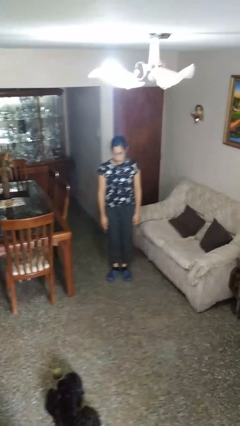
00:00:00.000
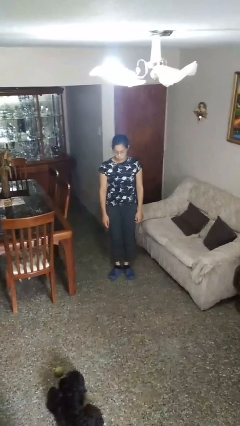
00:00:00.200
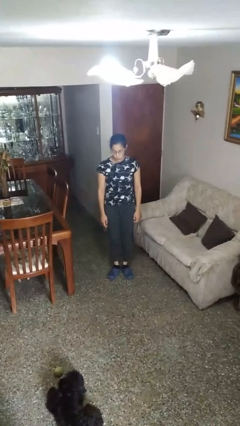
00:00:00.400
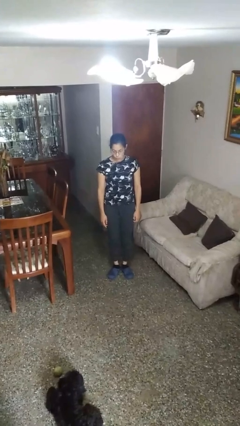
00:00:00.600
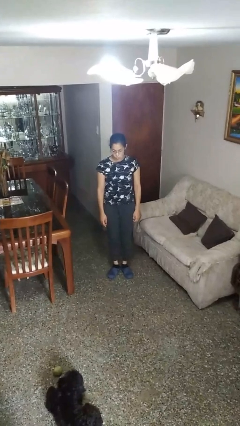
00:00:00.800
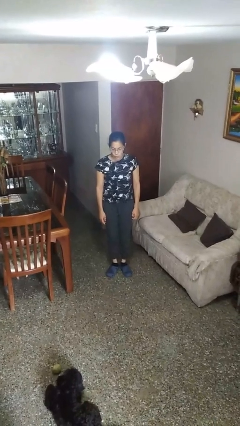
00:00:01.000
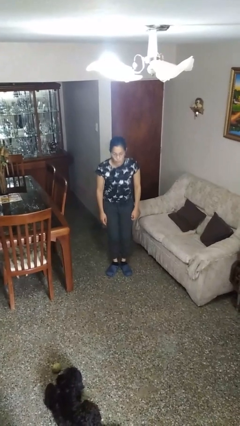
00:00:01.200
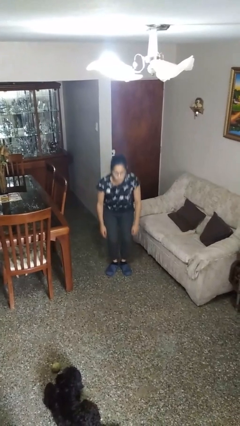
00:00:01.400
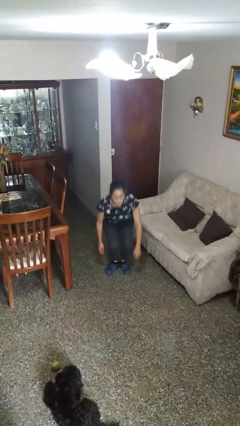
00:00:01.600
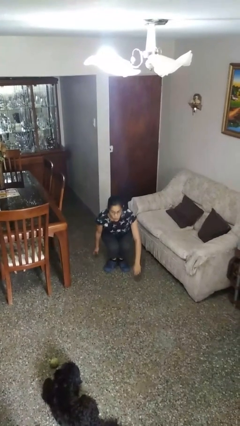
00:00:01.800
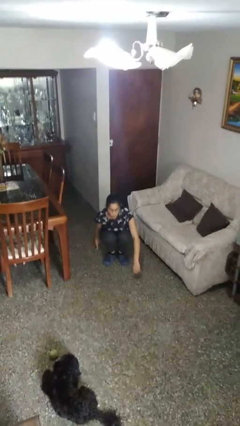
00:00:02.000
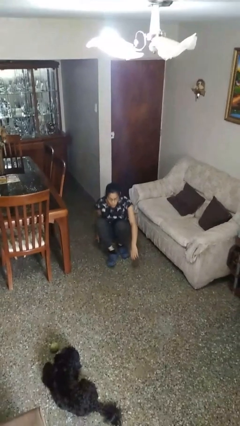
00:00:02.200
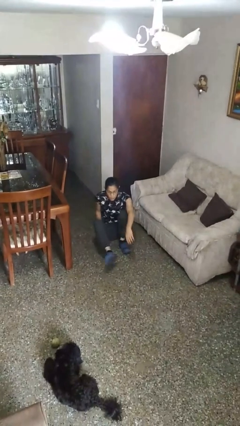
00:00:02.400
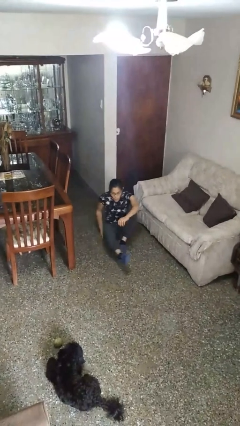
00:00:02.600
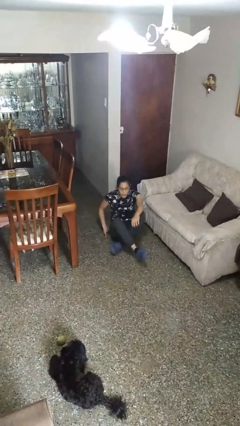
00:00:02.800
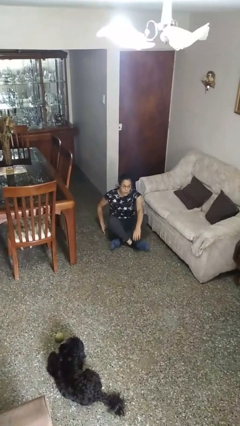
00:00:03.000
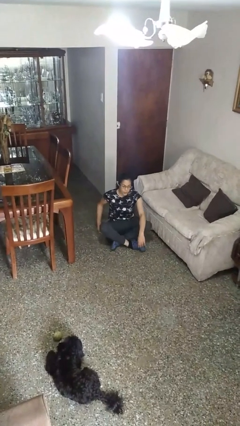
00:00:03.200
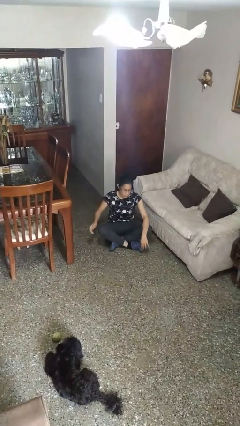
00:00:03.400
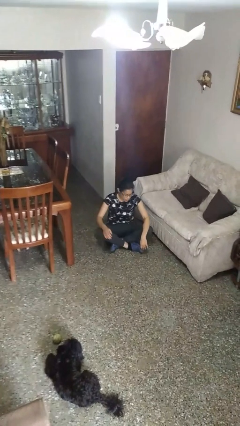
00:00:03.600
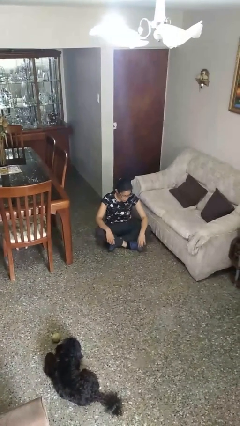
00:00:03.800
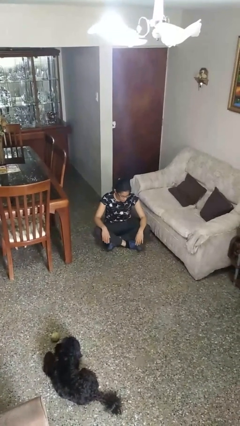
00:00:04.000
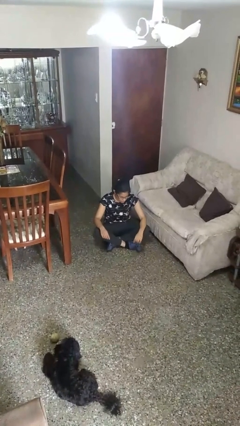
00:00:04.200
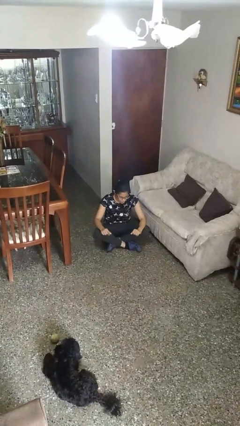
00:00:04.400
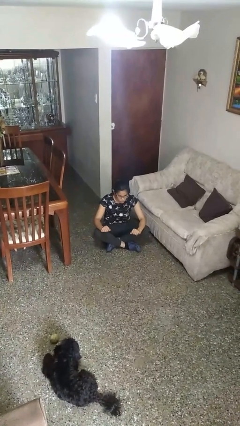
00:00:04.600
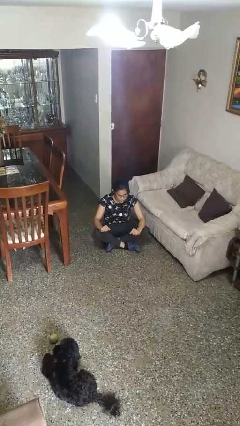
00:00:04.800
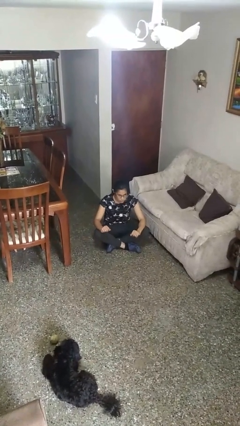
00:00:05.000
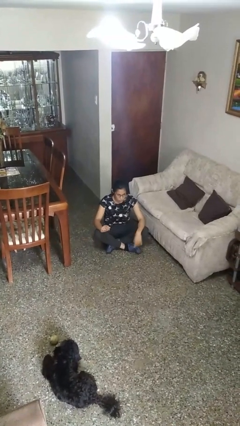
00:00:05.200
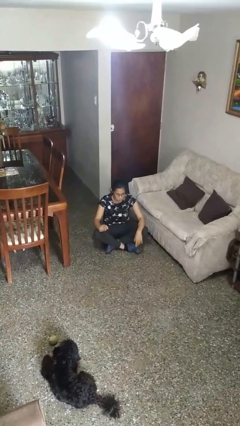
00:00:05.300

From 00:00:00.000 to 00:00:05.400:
person sits crisscross

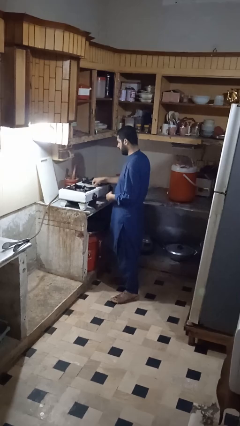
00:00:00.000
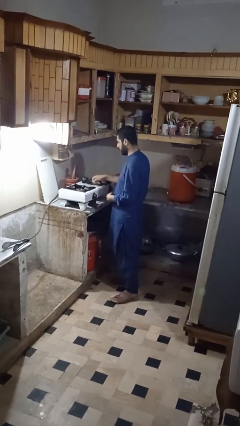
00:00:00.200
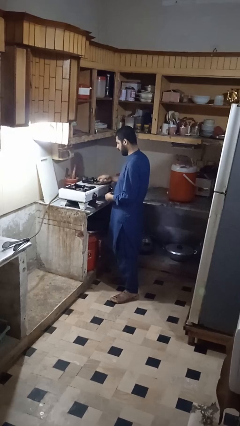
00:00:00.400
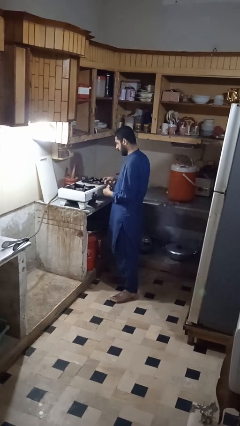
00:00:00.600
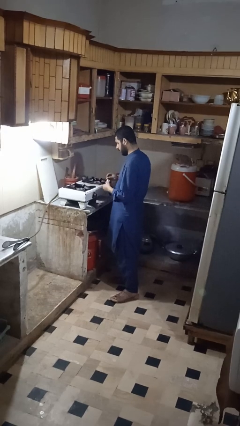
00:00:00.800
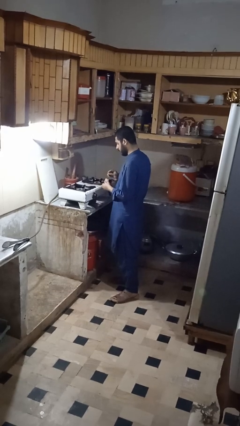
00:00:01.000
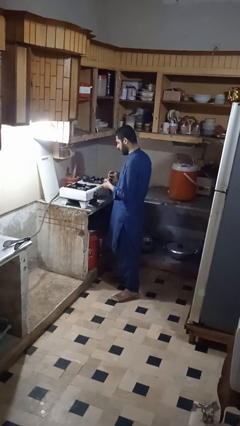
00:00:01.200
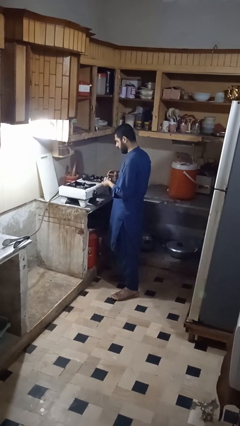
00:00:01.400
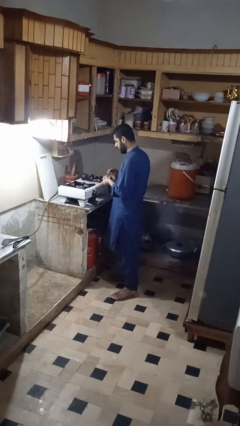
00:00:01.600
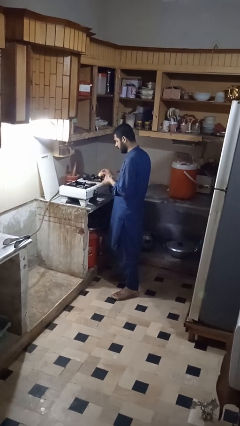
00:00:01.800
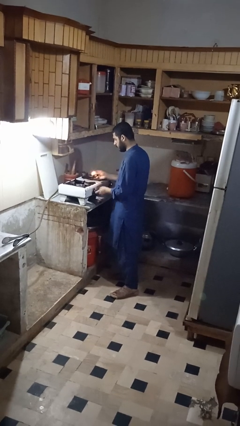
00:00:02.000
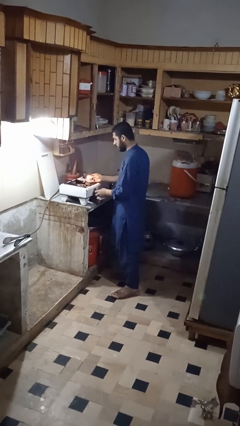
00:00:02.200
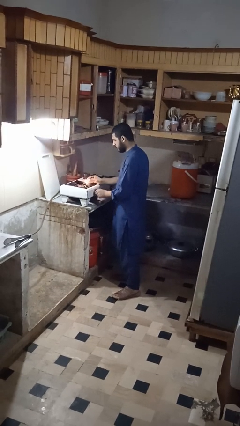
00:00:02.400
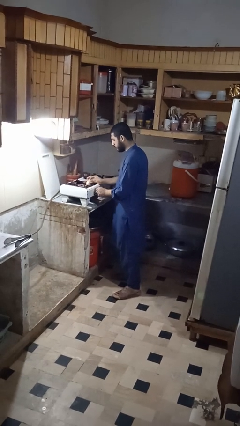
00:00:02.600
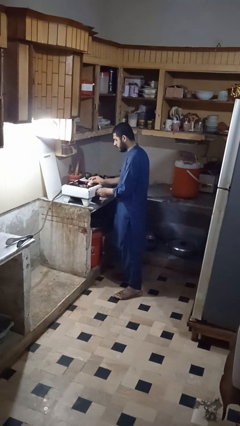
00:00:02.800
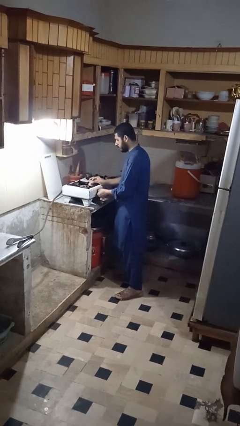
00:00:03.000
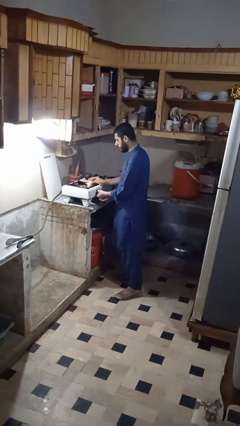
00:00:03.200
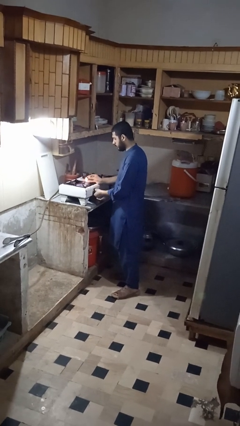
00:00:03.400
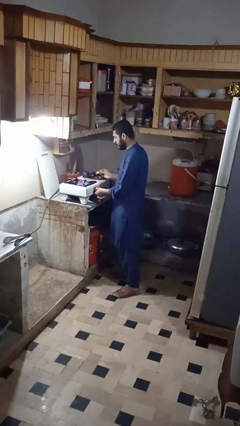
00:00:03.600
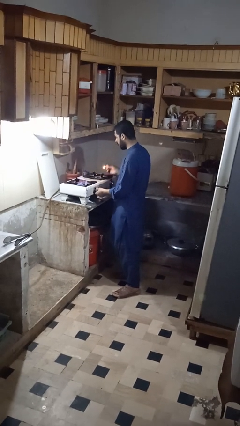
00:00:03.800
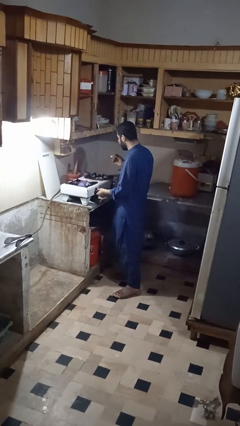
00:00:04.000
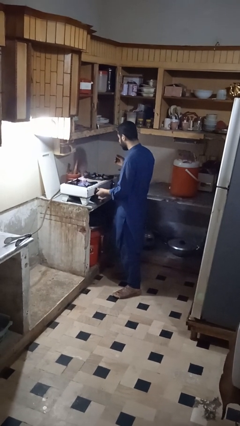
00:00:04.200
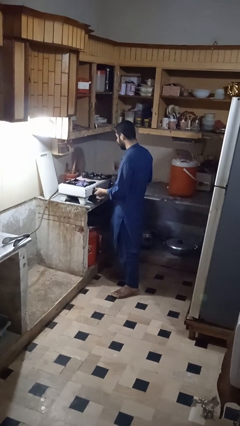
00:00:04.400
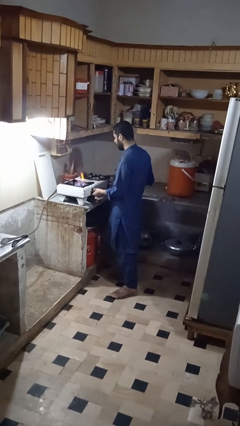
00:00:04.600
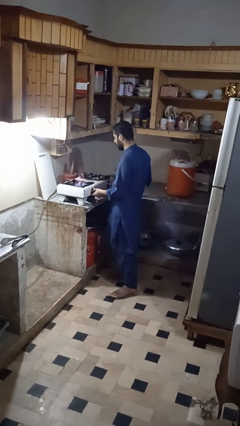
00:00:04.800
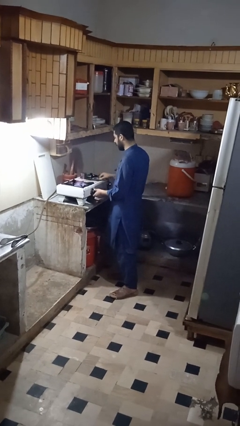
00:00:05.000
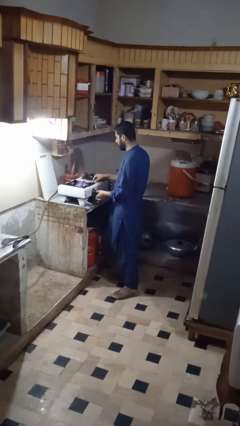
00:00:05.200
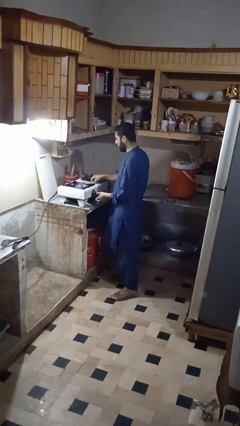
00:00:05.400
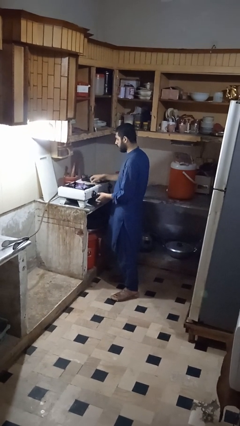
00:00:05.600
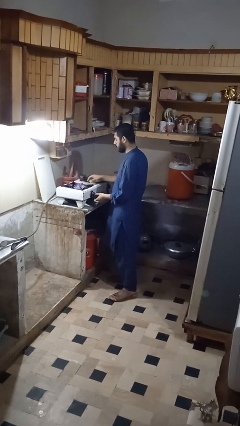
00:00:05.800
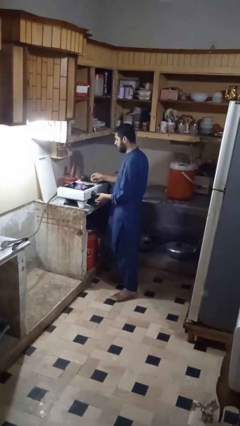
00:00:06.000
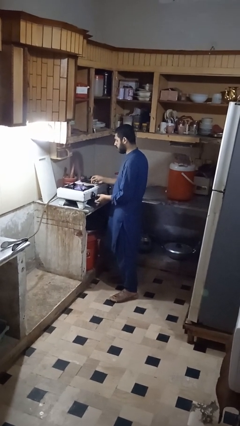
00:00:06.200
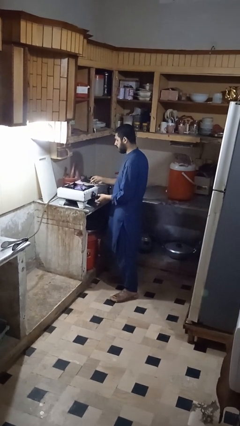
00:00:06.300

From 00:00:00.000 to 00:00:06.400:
person turns on stovetop

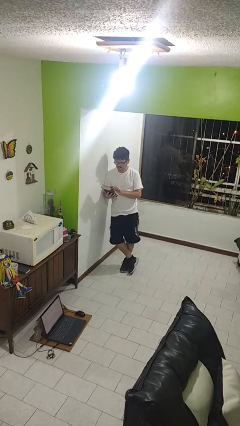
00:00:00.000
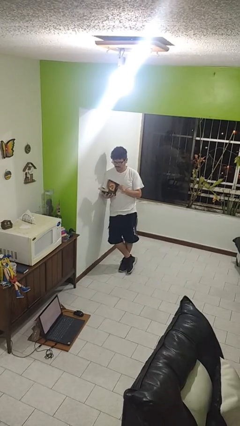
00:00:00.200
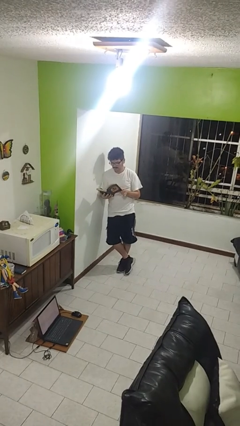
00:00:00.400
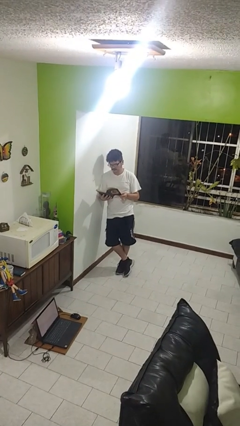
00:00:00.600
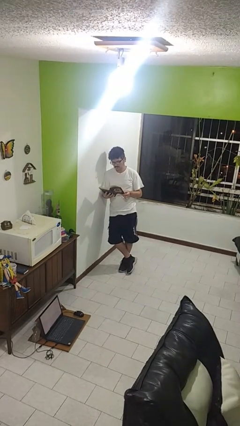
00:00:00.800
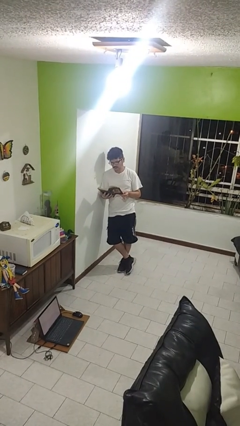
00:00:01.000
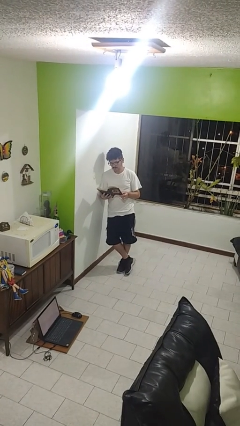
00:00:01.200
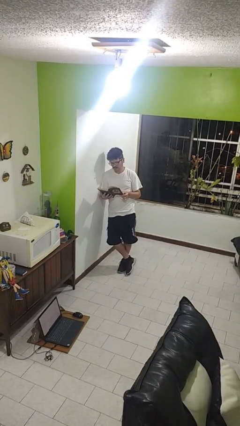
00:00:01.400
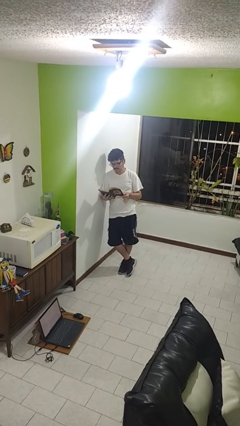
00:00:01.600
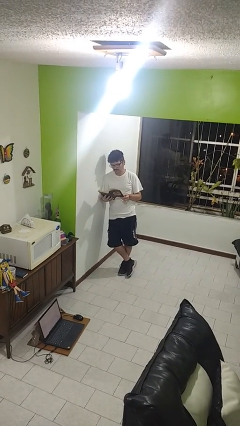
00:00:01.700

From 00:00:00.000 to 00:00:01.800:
person reads book

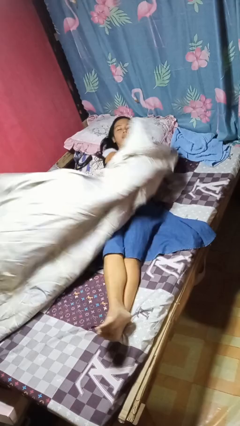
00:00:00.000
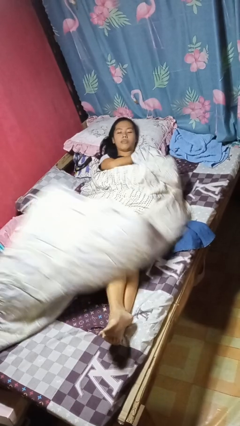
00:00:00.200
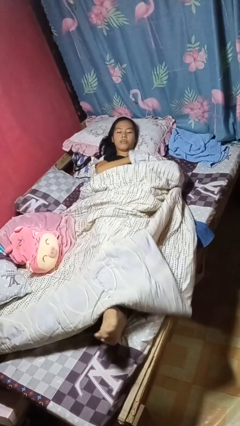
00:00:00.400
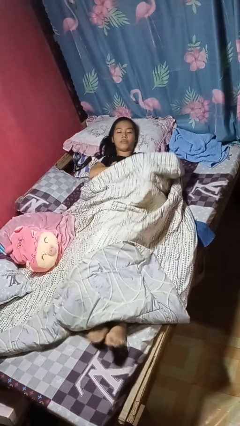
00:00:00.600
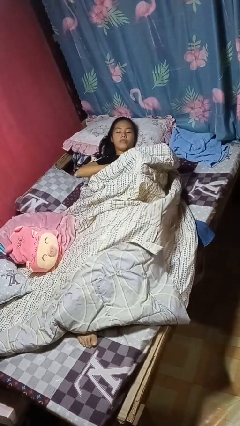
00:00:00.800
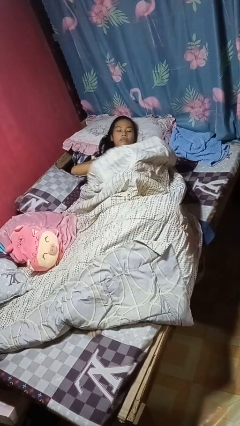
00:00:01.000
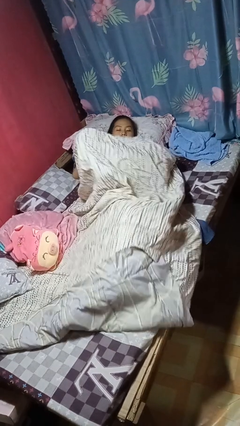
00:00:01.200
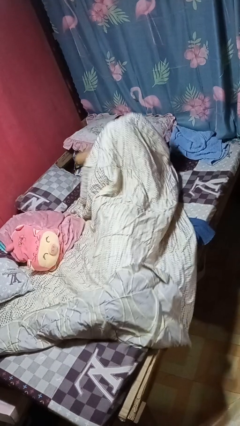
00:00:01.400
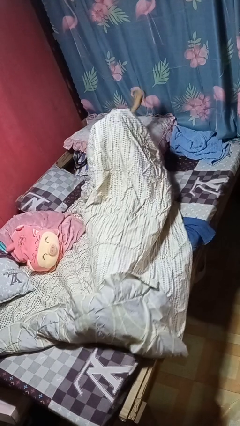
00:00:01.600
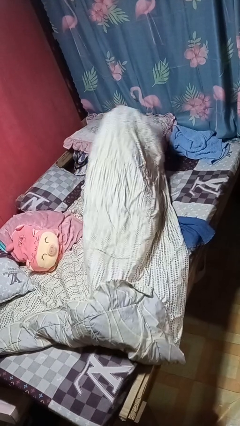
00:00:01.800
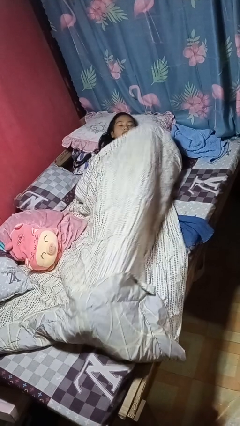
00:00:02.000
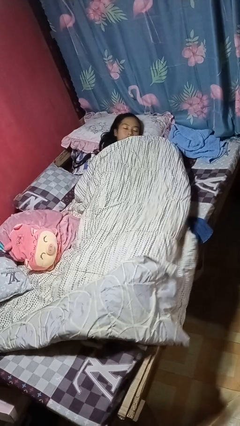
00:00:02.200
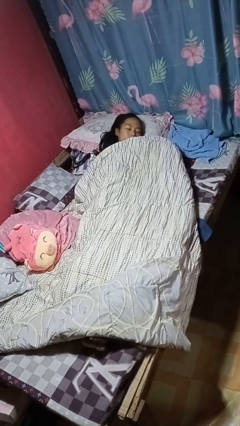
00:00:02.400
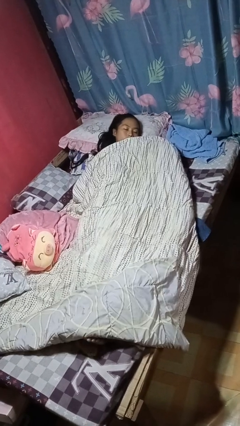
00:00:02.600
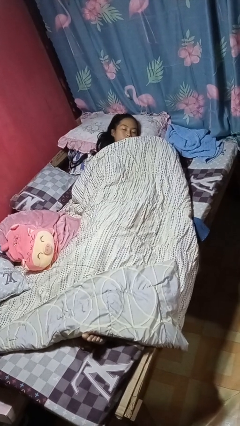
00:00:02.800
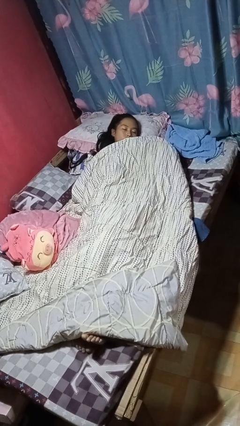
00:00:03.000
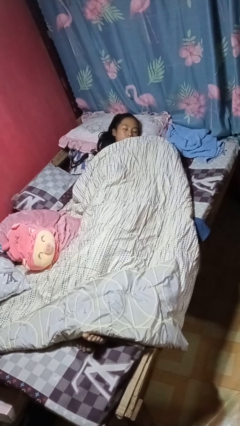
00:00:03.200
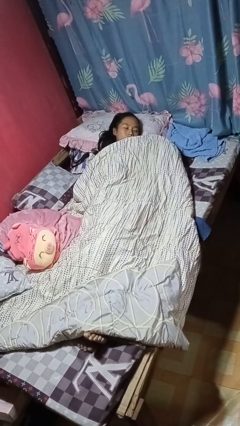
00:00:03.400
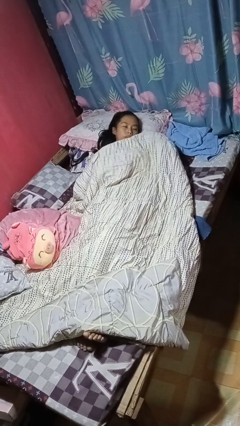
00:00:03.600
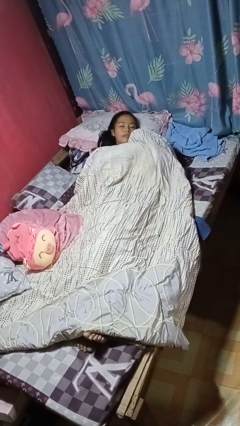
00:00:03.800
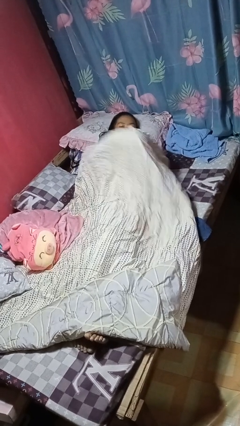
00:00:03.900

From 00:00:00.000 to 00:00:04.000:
person covers with bedsheets

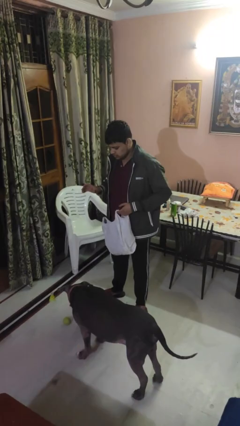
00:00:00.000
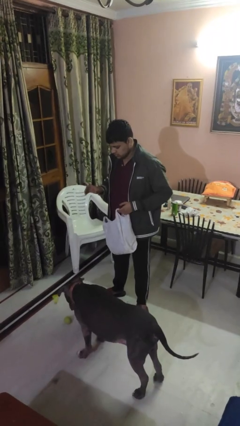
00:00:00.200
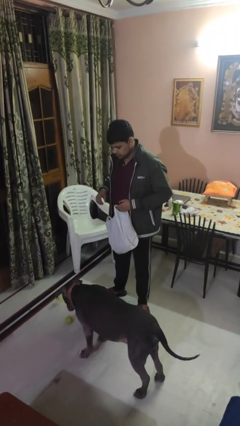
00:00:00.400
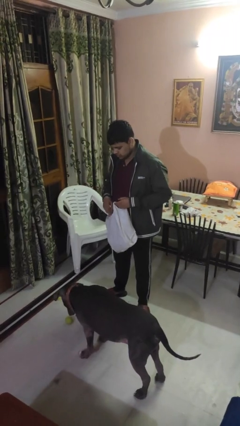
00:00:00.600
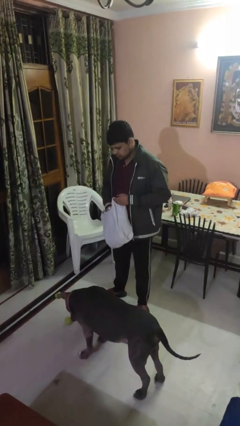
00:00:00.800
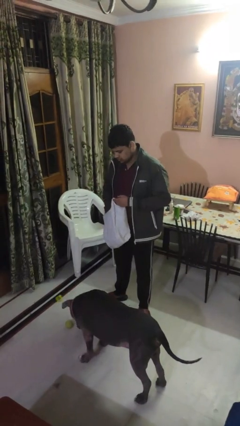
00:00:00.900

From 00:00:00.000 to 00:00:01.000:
person throws object to dog
